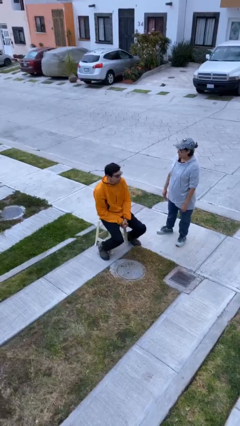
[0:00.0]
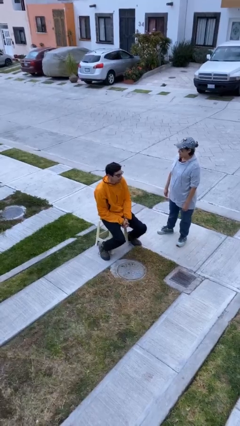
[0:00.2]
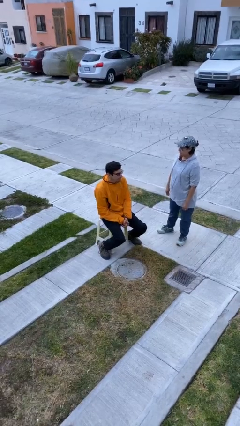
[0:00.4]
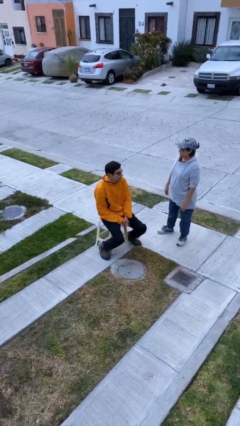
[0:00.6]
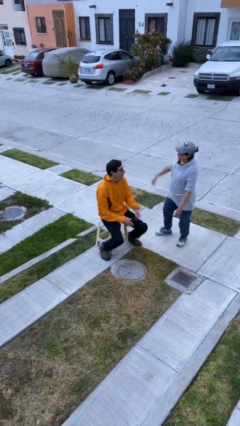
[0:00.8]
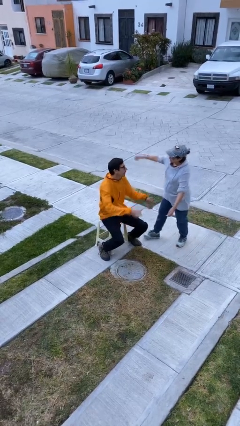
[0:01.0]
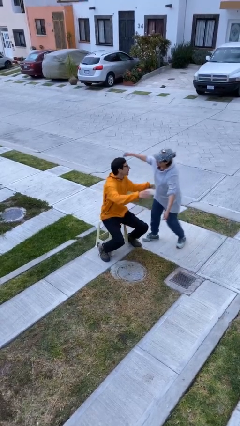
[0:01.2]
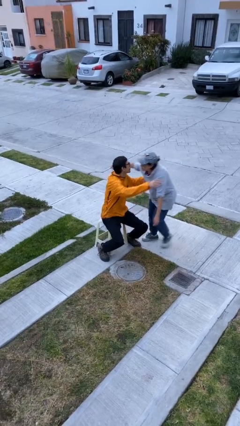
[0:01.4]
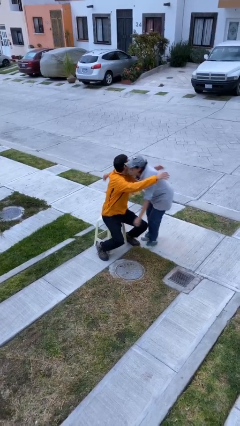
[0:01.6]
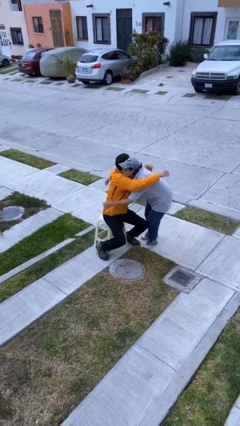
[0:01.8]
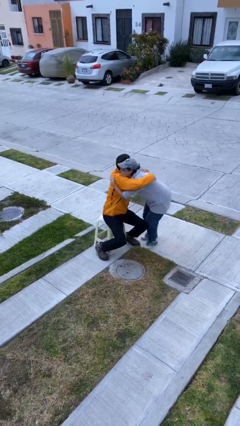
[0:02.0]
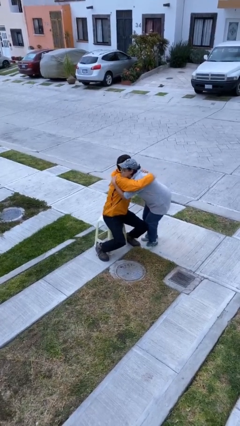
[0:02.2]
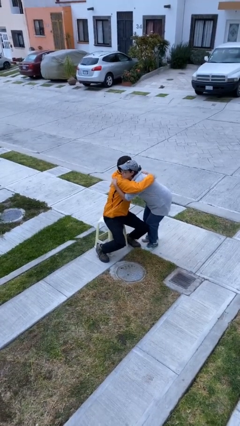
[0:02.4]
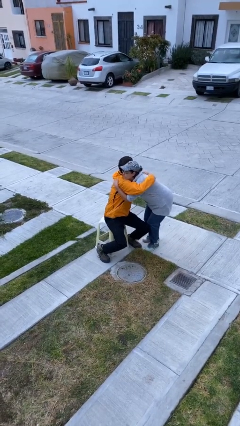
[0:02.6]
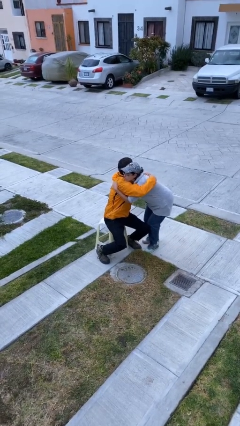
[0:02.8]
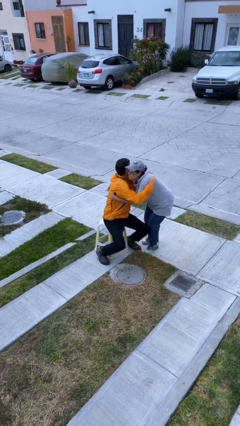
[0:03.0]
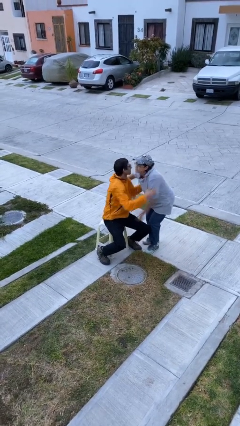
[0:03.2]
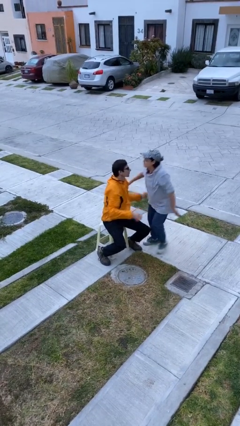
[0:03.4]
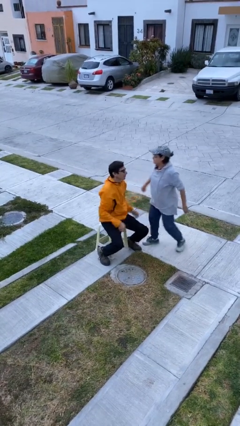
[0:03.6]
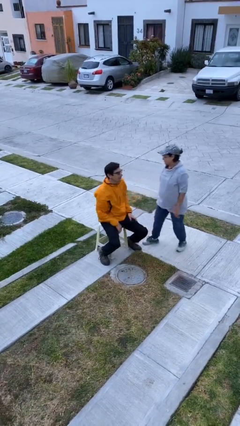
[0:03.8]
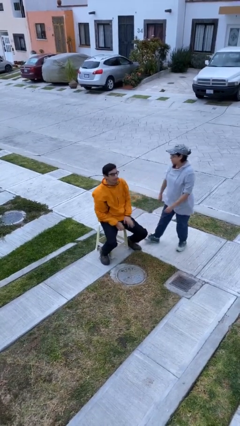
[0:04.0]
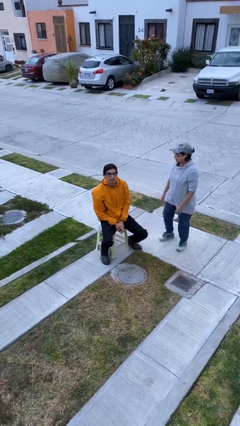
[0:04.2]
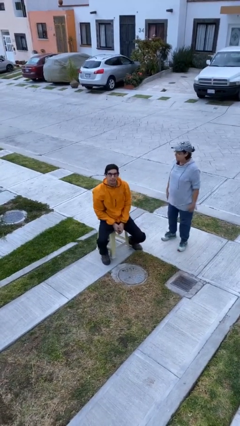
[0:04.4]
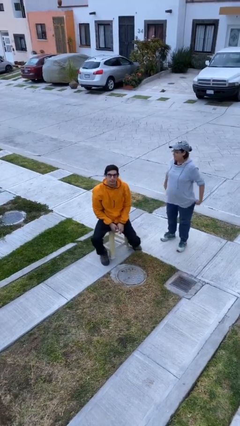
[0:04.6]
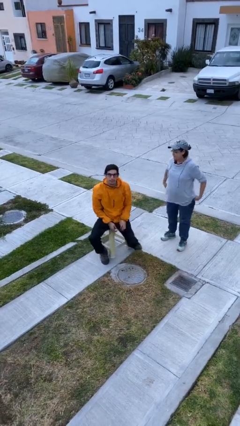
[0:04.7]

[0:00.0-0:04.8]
person embraces person

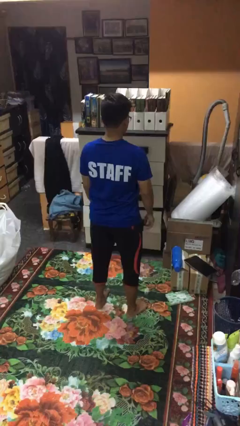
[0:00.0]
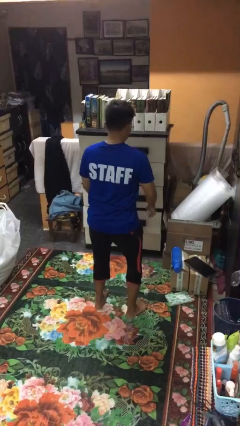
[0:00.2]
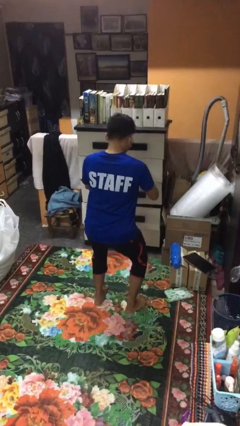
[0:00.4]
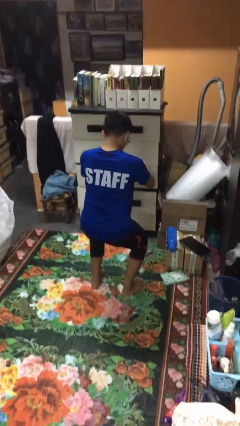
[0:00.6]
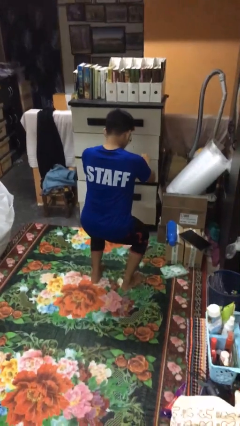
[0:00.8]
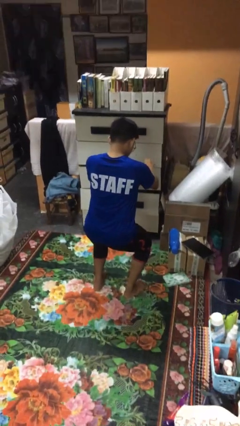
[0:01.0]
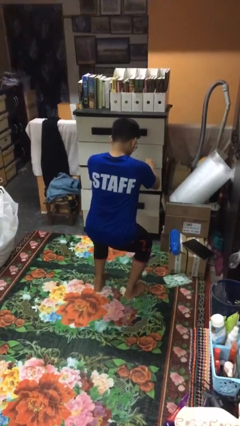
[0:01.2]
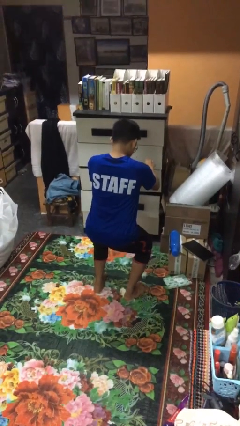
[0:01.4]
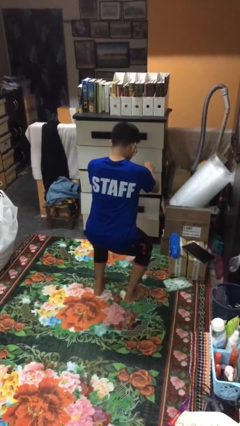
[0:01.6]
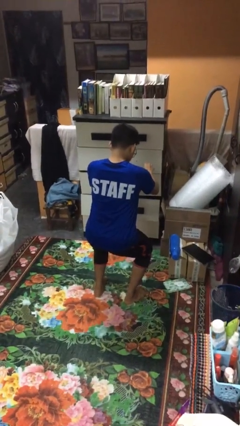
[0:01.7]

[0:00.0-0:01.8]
person squats

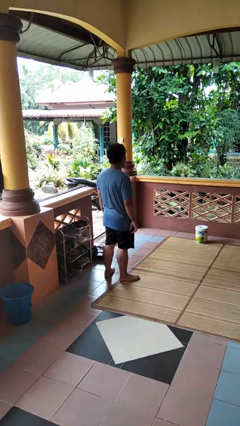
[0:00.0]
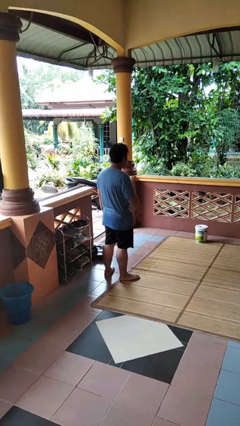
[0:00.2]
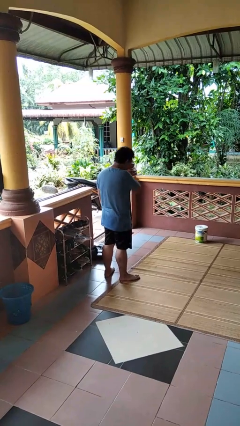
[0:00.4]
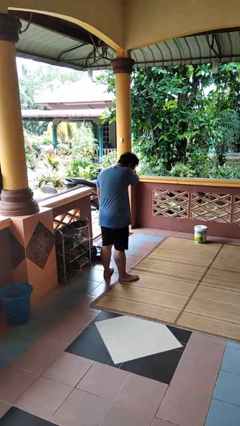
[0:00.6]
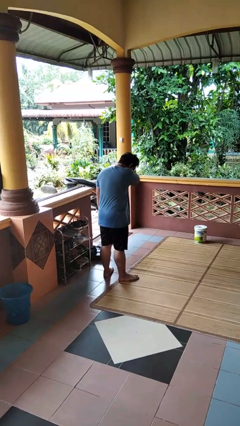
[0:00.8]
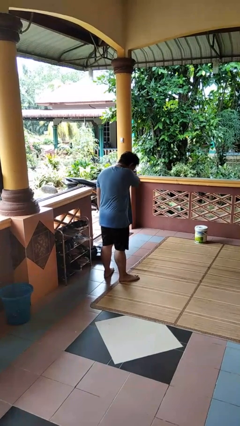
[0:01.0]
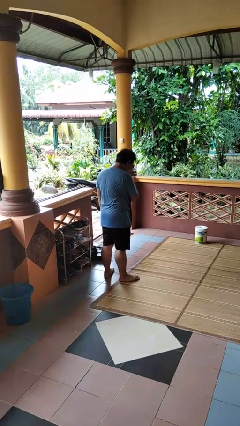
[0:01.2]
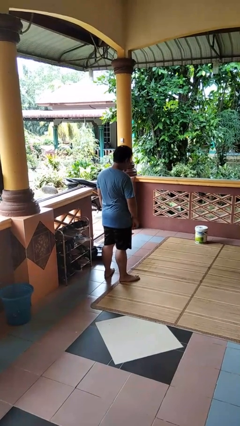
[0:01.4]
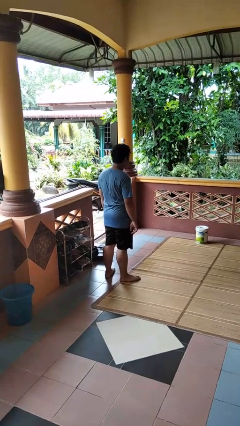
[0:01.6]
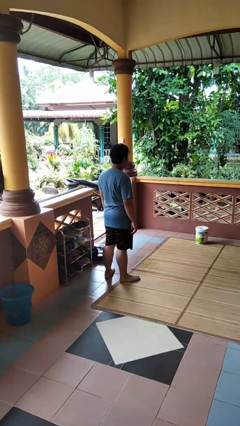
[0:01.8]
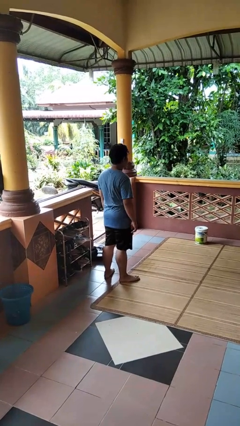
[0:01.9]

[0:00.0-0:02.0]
person sneezes into hand

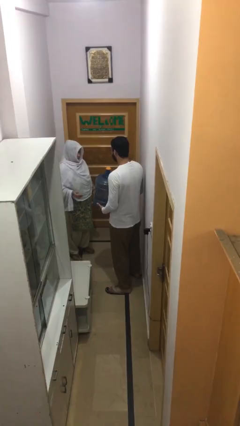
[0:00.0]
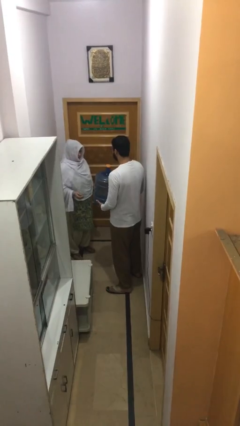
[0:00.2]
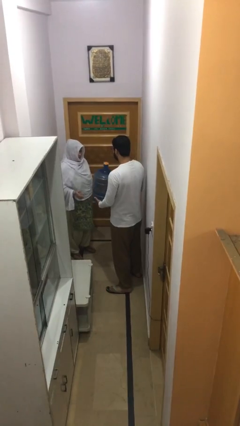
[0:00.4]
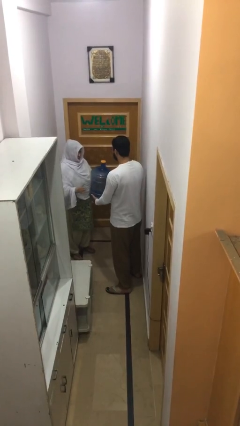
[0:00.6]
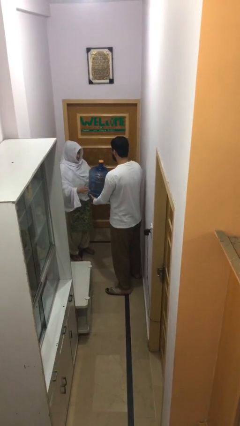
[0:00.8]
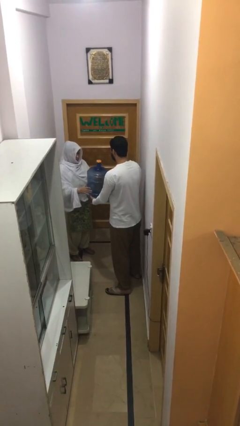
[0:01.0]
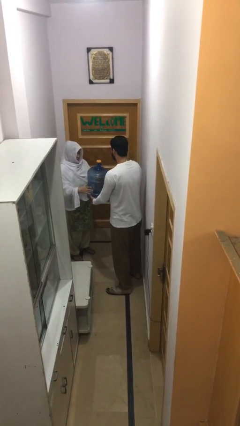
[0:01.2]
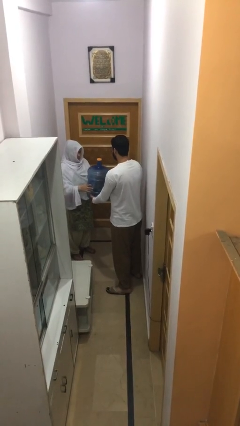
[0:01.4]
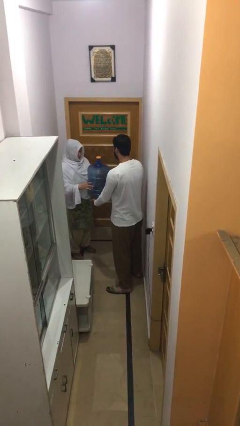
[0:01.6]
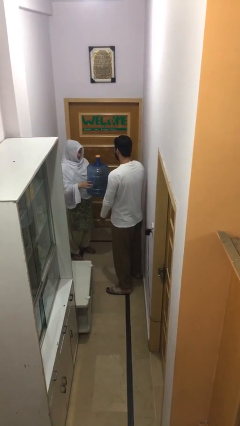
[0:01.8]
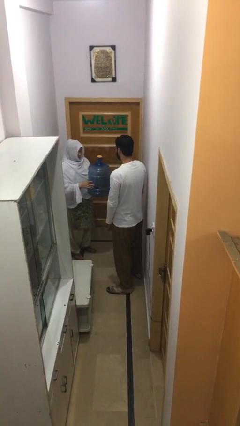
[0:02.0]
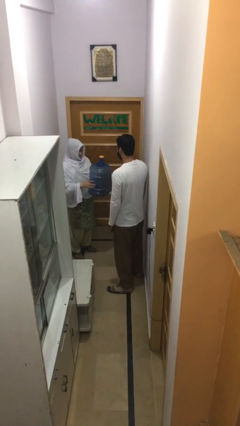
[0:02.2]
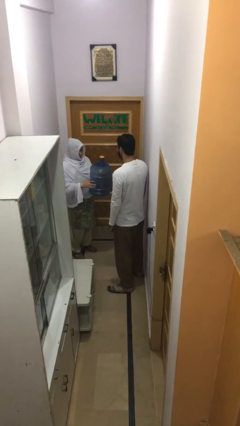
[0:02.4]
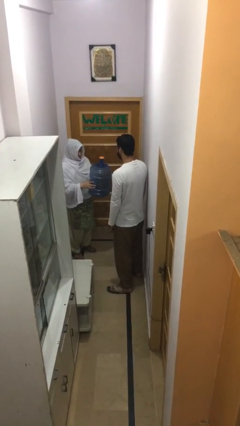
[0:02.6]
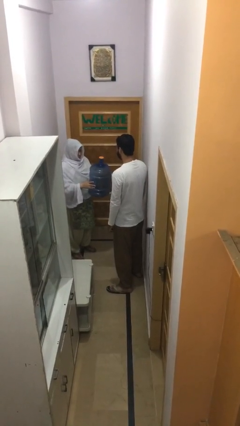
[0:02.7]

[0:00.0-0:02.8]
person transfers object to person

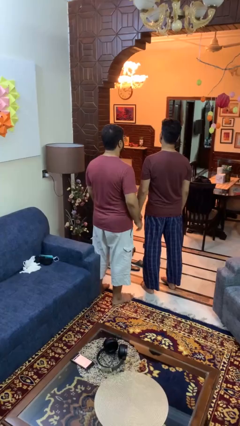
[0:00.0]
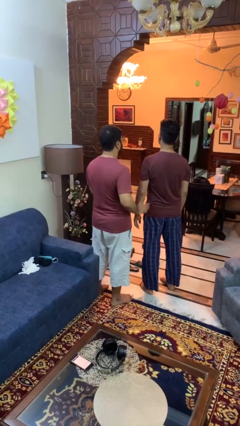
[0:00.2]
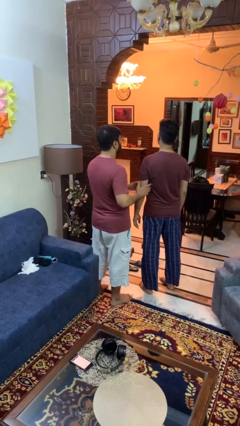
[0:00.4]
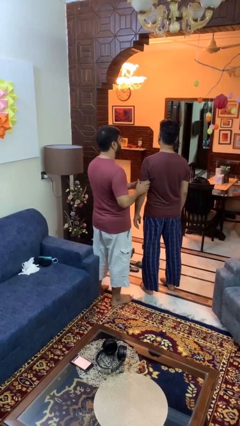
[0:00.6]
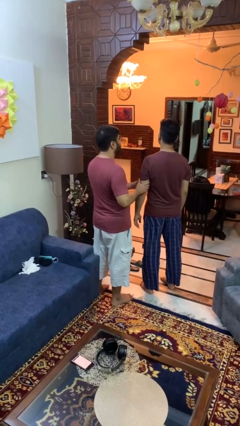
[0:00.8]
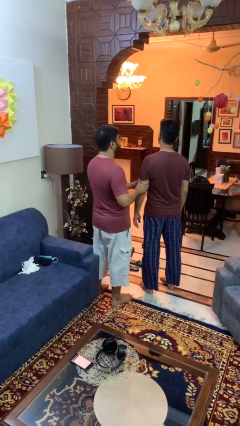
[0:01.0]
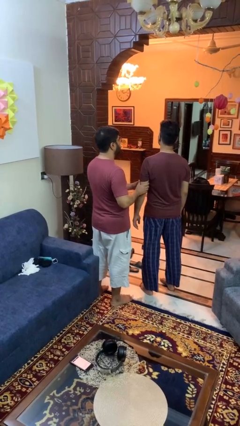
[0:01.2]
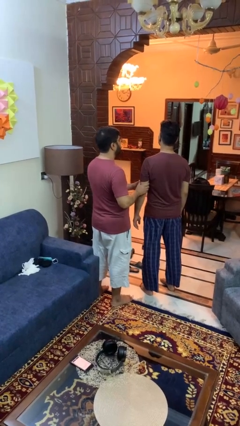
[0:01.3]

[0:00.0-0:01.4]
person grabs person by bicep

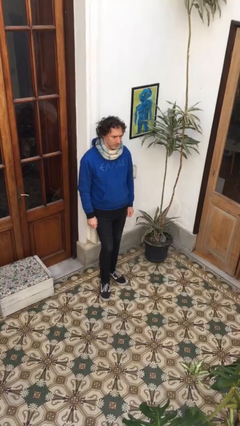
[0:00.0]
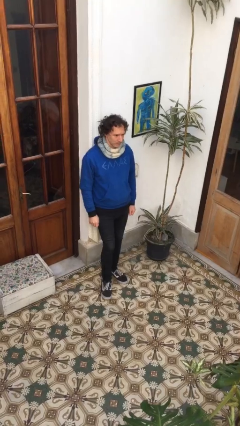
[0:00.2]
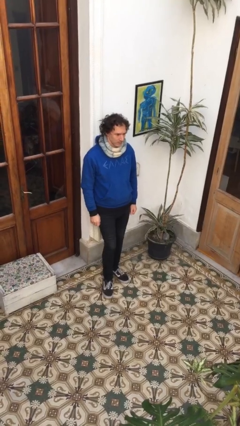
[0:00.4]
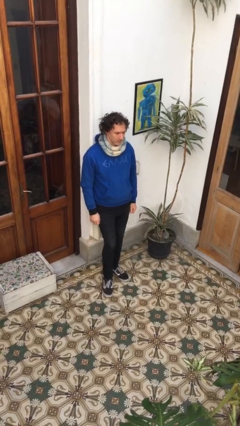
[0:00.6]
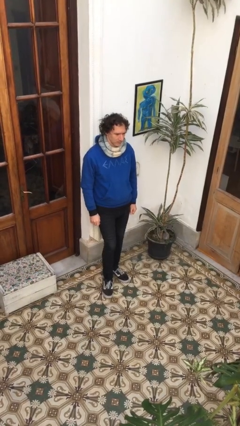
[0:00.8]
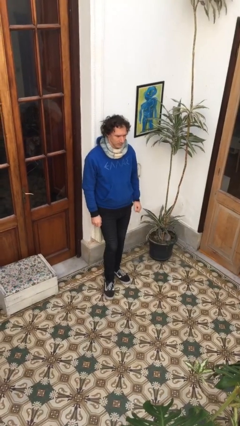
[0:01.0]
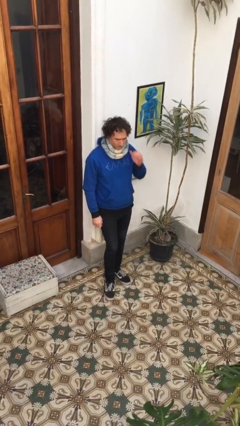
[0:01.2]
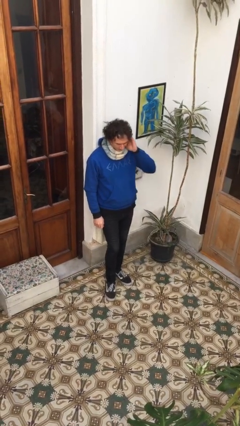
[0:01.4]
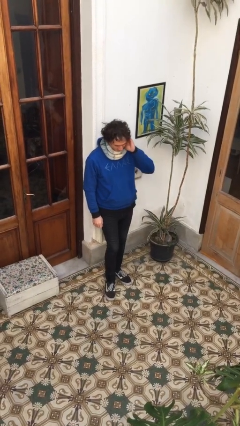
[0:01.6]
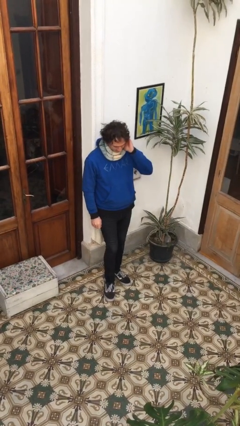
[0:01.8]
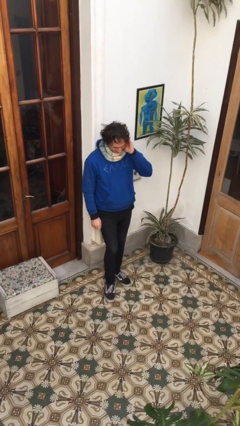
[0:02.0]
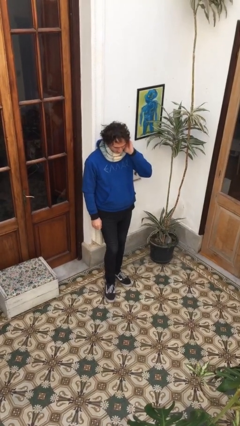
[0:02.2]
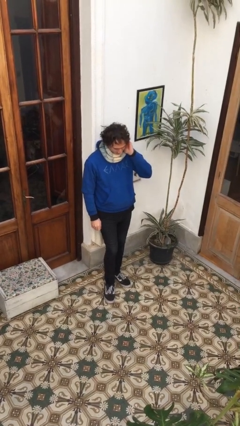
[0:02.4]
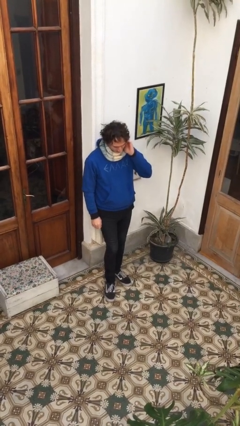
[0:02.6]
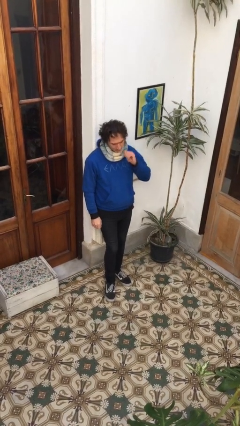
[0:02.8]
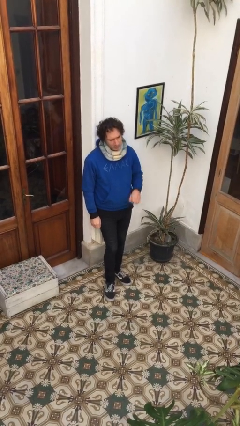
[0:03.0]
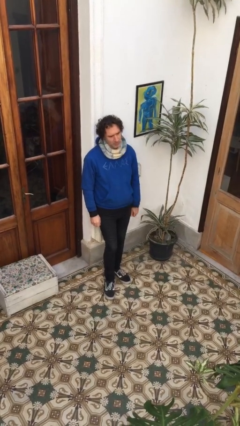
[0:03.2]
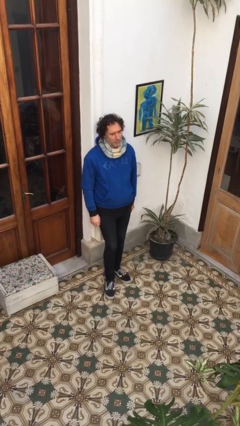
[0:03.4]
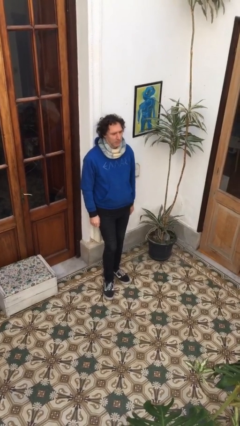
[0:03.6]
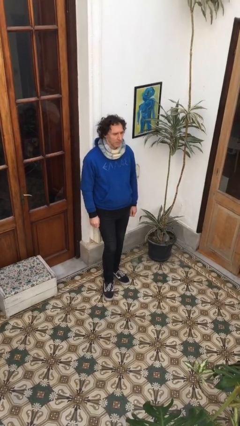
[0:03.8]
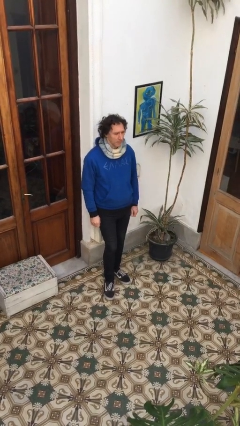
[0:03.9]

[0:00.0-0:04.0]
person scratches face

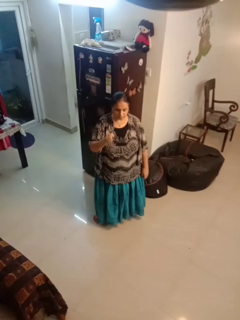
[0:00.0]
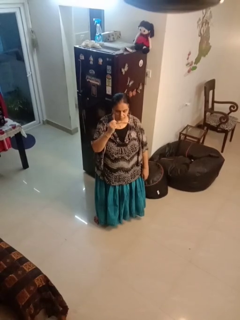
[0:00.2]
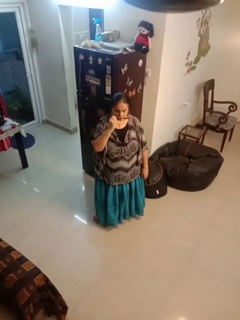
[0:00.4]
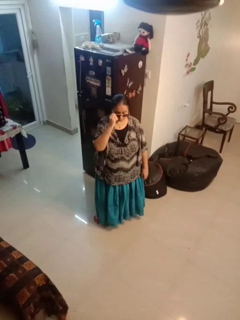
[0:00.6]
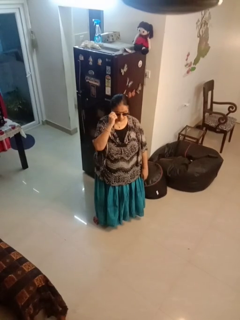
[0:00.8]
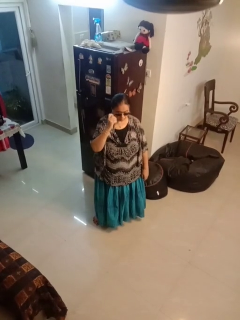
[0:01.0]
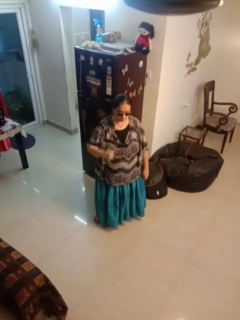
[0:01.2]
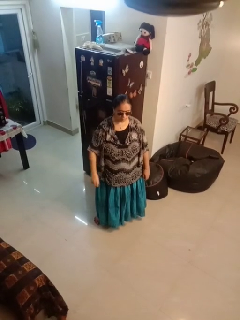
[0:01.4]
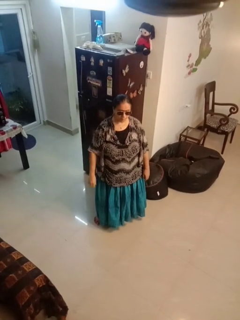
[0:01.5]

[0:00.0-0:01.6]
person puts on sunglasses
